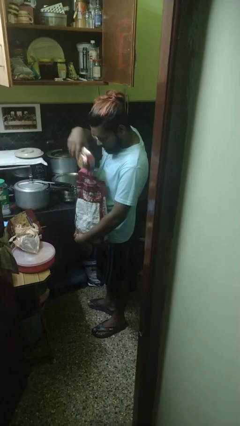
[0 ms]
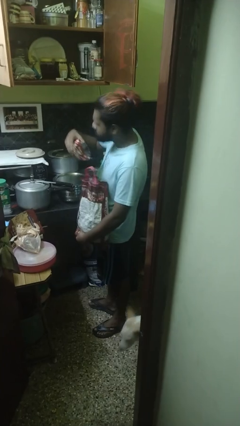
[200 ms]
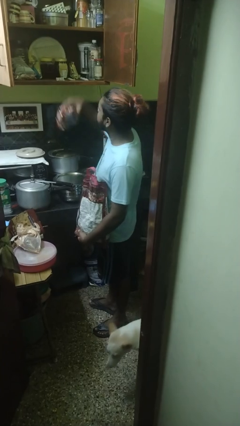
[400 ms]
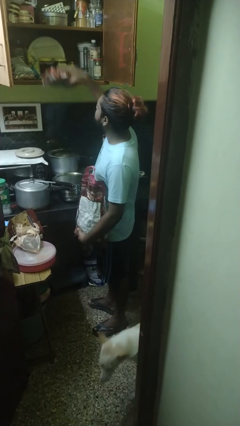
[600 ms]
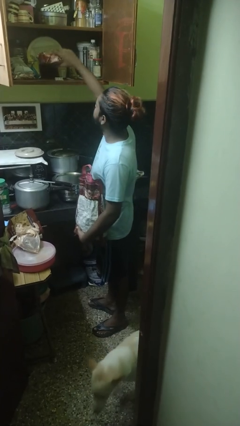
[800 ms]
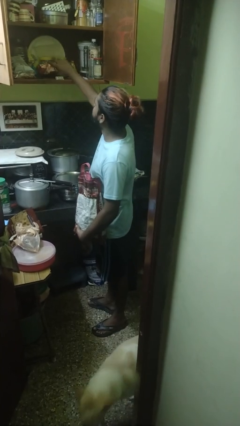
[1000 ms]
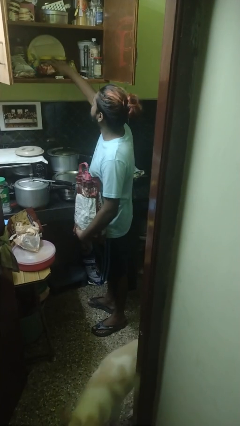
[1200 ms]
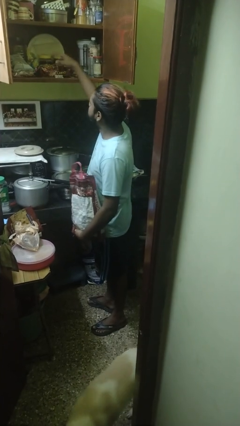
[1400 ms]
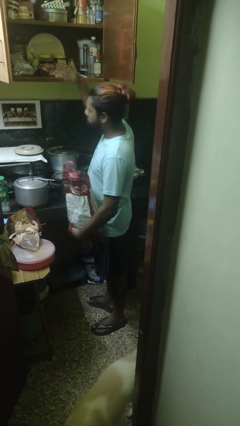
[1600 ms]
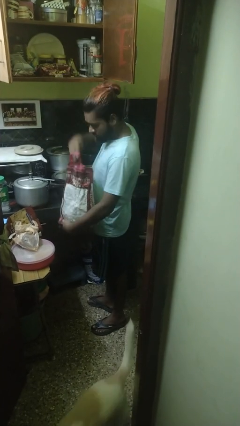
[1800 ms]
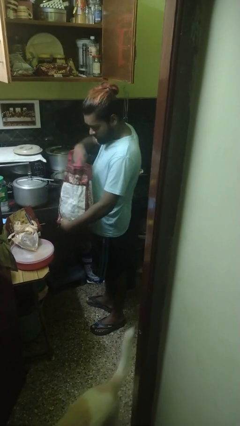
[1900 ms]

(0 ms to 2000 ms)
person loads groceries into cabinet

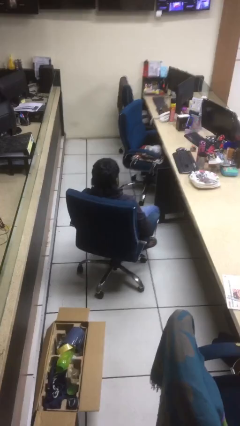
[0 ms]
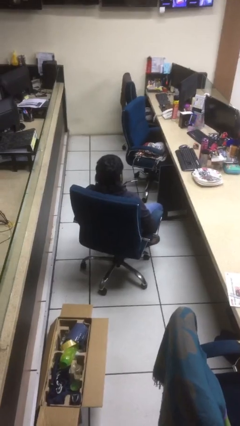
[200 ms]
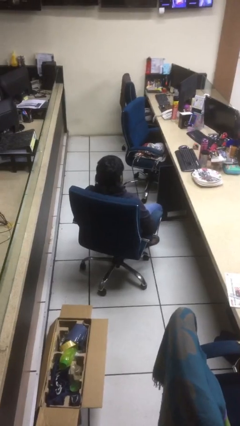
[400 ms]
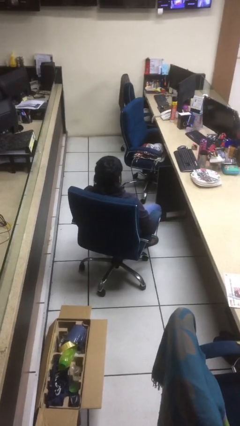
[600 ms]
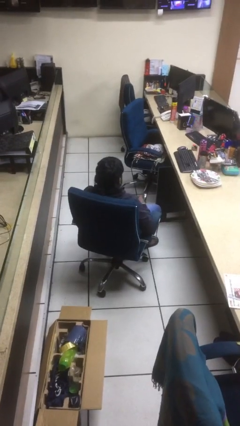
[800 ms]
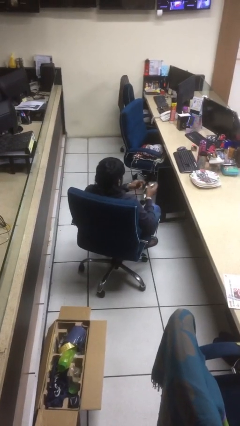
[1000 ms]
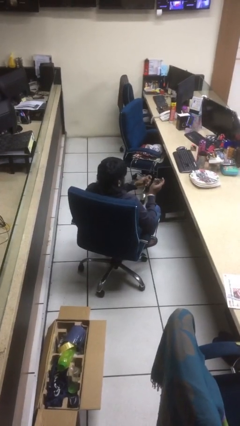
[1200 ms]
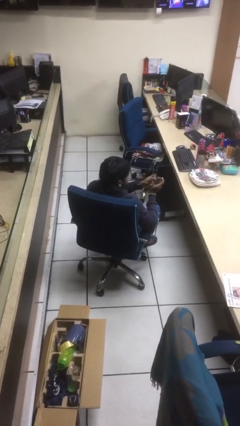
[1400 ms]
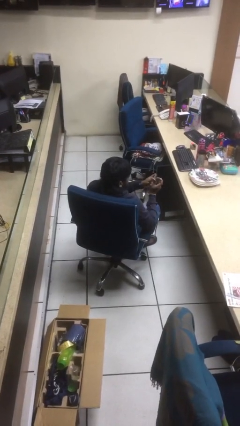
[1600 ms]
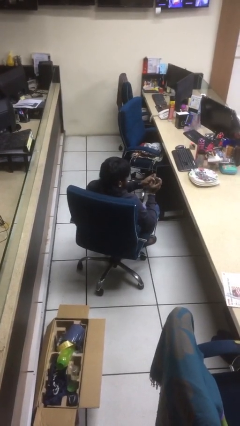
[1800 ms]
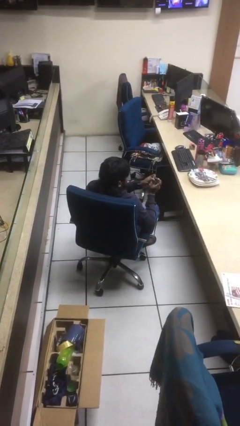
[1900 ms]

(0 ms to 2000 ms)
person clips fingernails

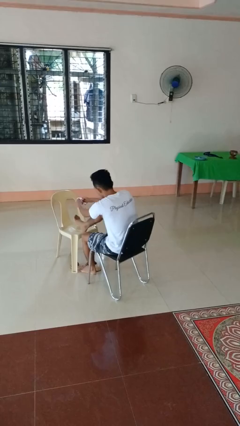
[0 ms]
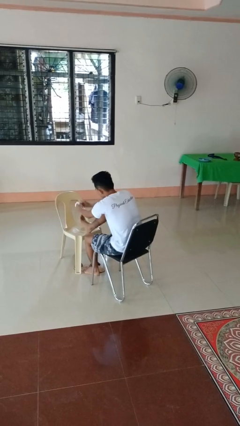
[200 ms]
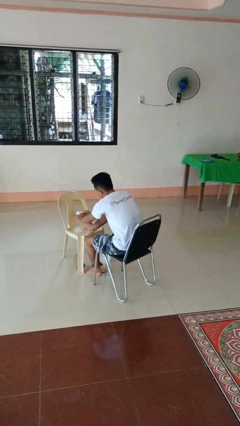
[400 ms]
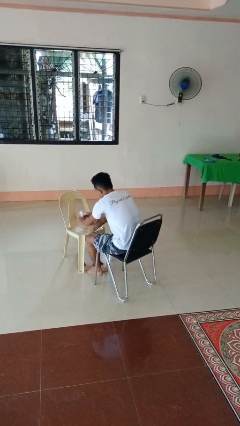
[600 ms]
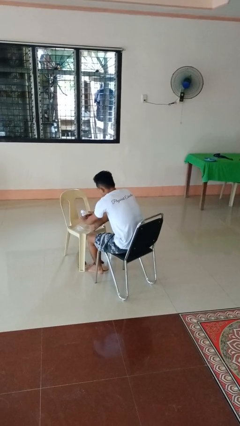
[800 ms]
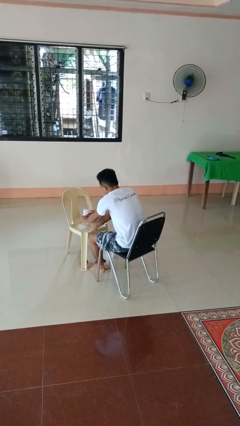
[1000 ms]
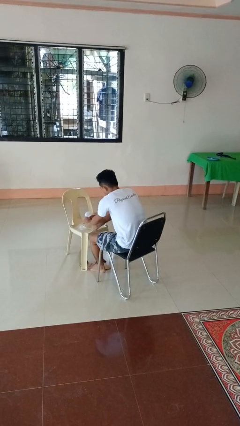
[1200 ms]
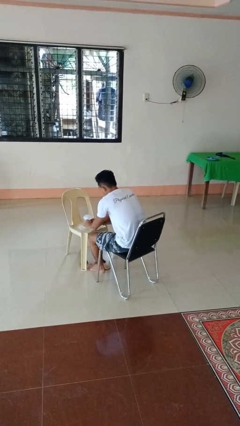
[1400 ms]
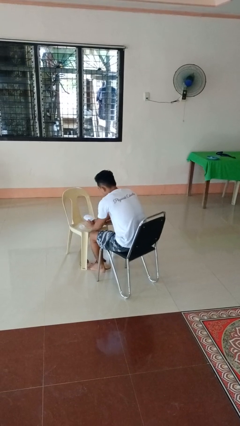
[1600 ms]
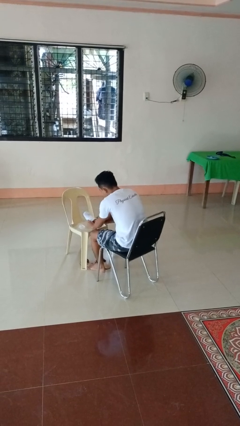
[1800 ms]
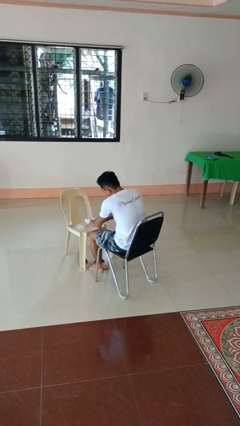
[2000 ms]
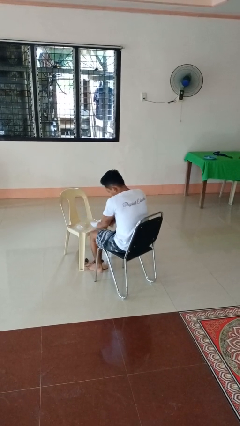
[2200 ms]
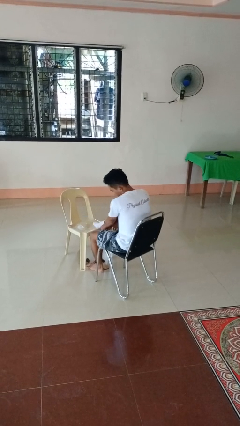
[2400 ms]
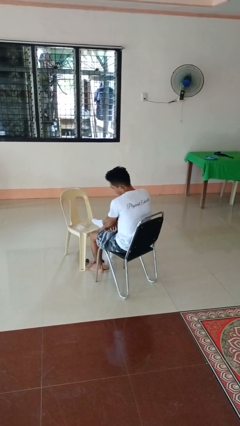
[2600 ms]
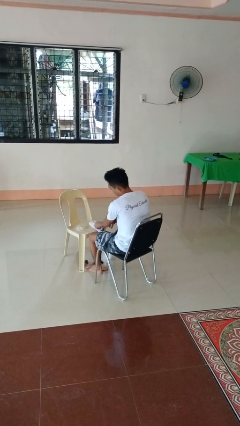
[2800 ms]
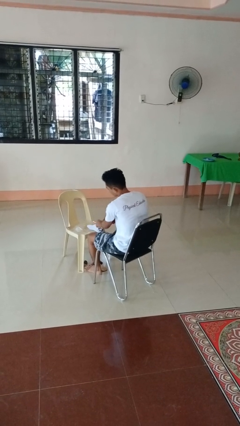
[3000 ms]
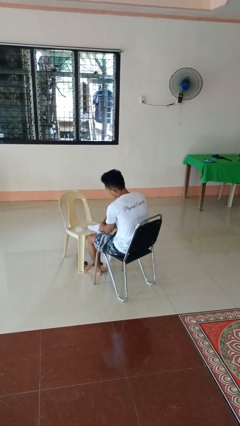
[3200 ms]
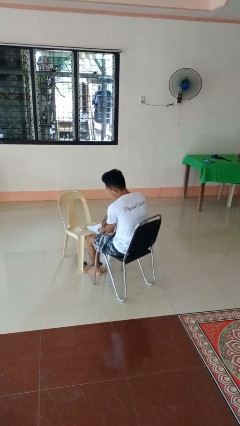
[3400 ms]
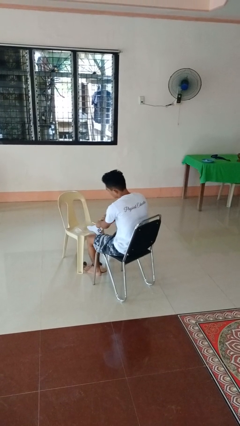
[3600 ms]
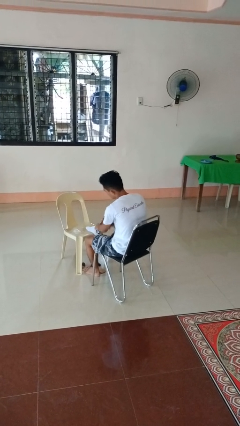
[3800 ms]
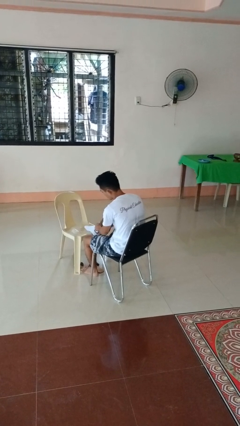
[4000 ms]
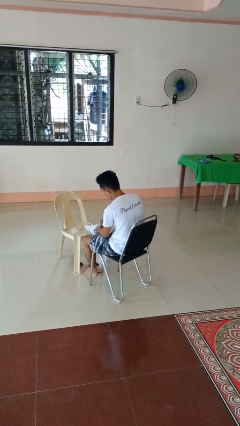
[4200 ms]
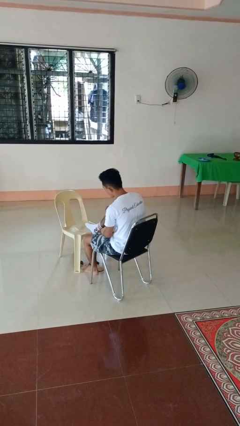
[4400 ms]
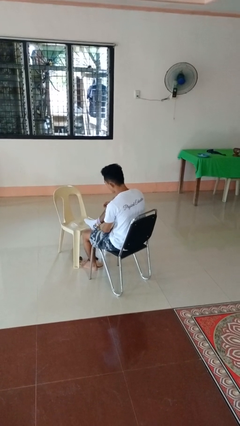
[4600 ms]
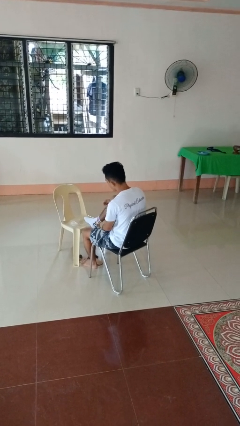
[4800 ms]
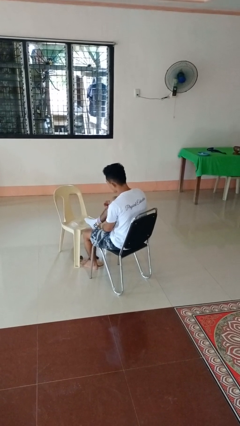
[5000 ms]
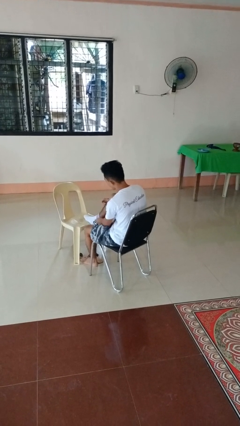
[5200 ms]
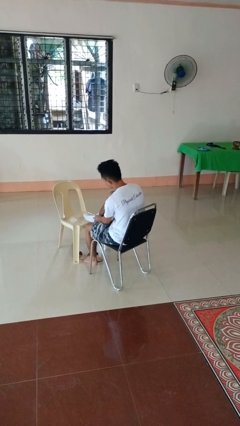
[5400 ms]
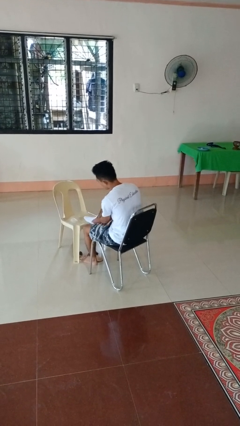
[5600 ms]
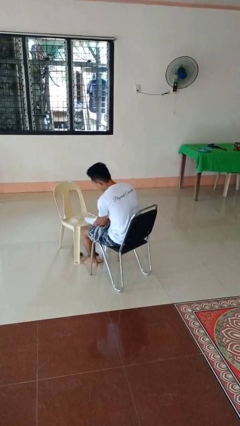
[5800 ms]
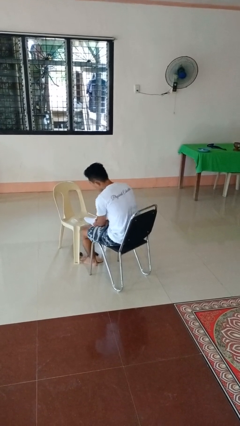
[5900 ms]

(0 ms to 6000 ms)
person puts on socks

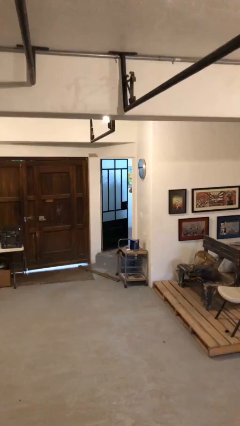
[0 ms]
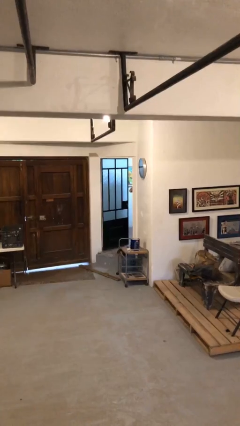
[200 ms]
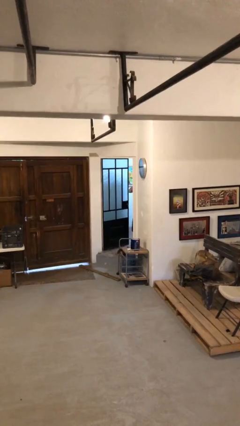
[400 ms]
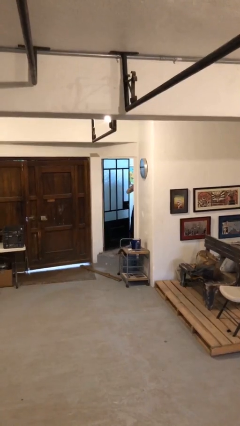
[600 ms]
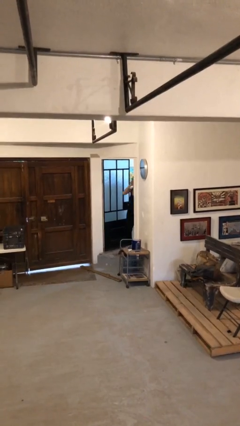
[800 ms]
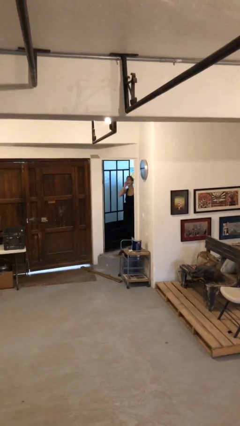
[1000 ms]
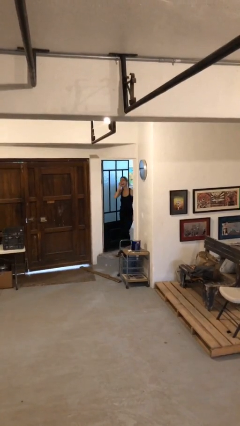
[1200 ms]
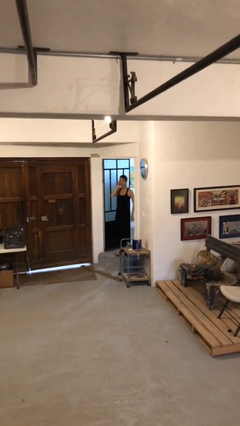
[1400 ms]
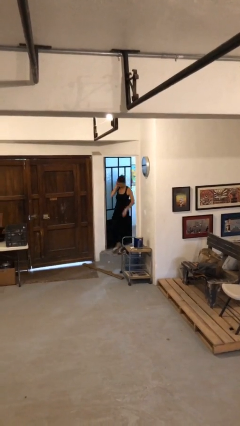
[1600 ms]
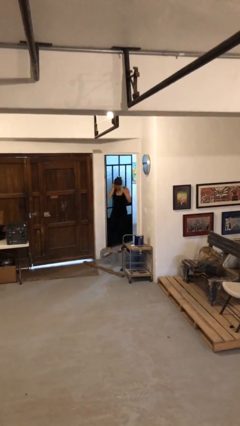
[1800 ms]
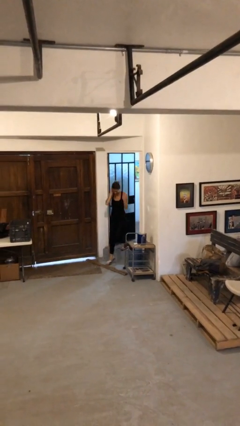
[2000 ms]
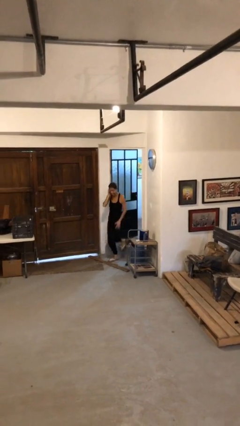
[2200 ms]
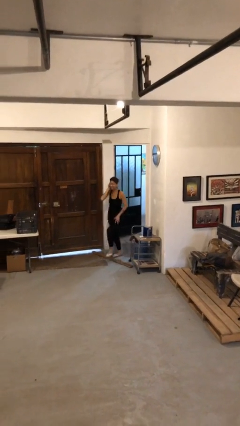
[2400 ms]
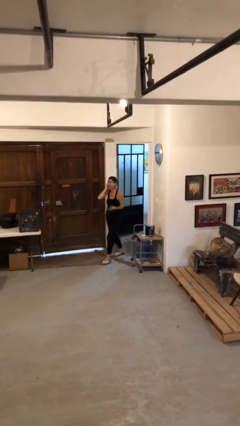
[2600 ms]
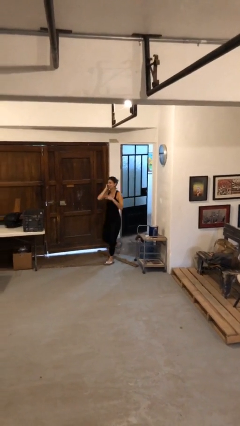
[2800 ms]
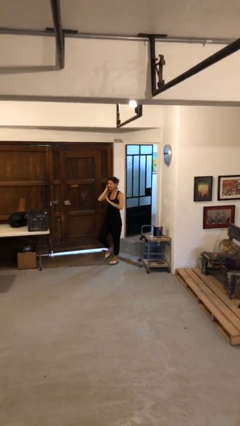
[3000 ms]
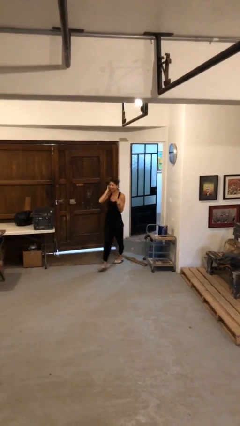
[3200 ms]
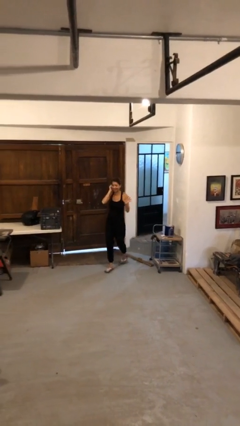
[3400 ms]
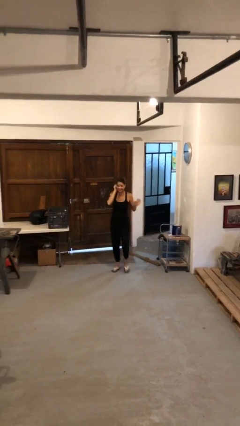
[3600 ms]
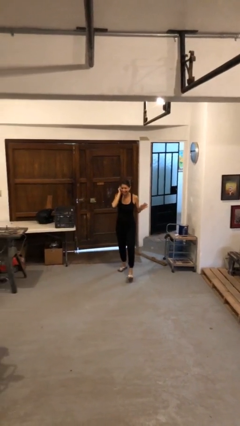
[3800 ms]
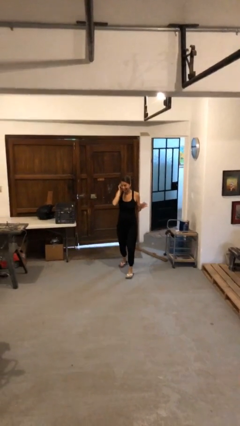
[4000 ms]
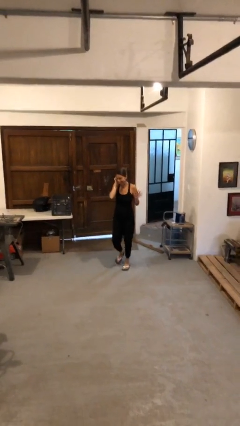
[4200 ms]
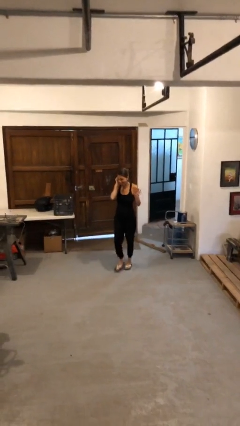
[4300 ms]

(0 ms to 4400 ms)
person enters scene through structure

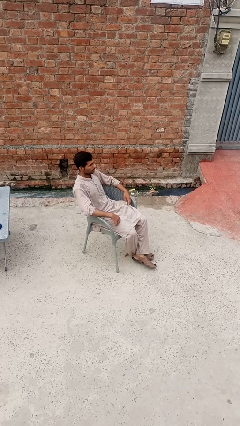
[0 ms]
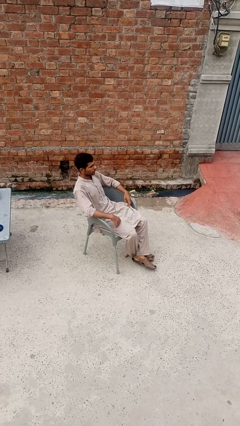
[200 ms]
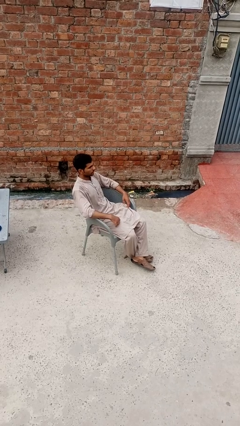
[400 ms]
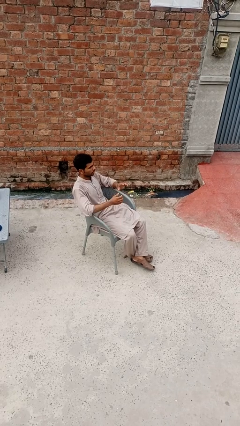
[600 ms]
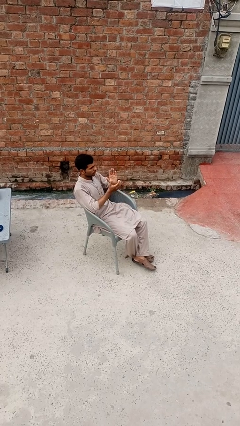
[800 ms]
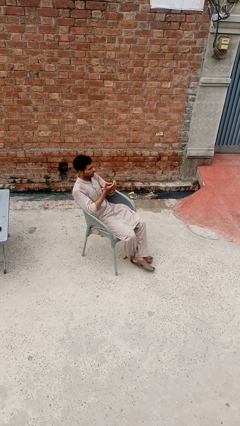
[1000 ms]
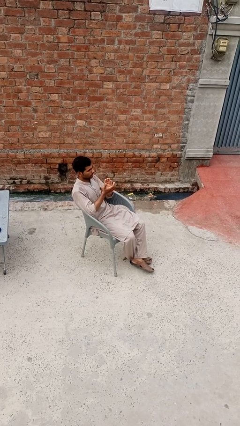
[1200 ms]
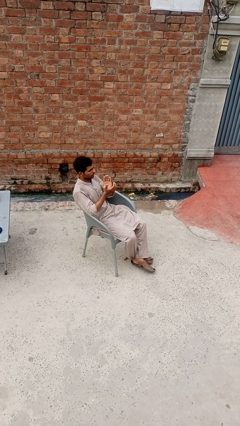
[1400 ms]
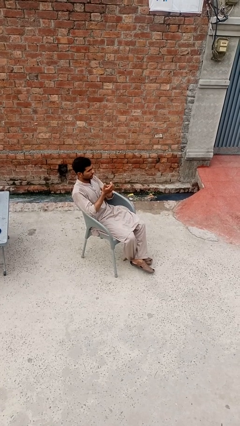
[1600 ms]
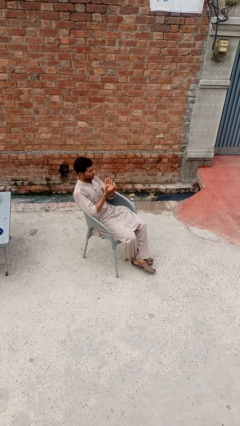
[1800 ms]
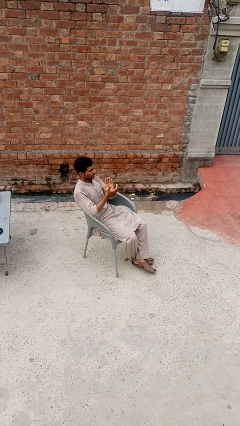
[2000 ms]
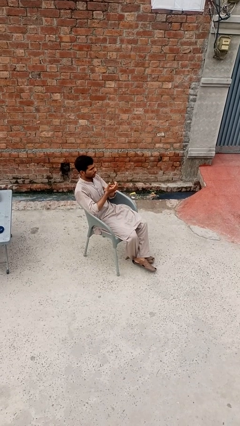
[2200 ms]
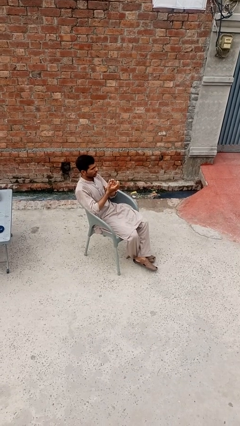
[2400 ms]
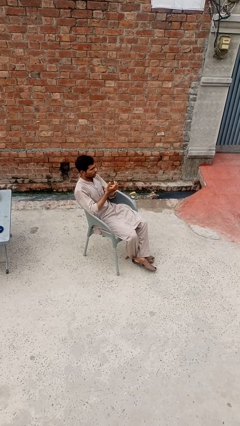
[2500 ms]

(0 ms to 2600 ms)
person claps hands

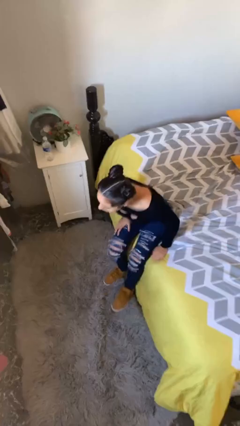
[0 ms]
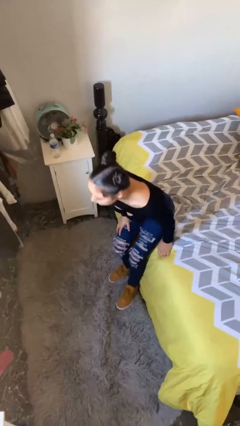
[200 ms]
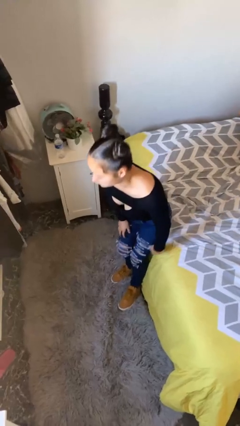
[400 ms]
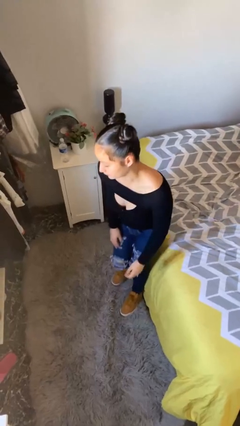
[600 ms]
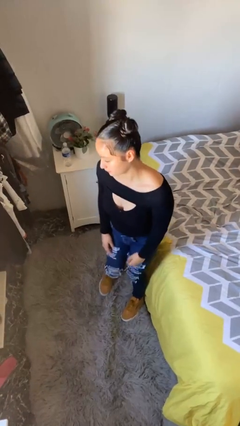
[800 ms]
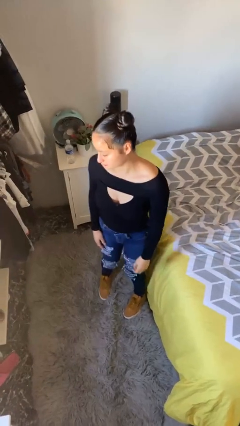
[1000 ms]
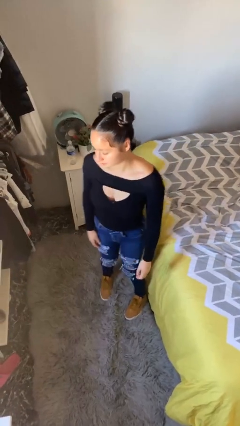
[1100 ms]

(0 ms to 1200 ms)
person stands up
